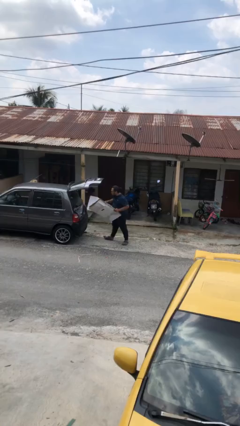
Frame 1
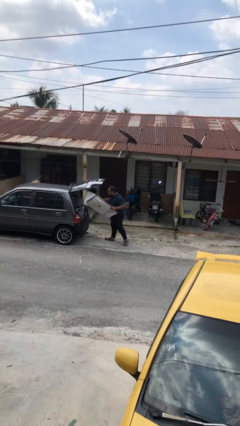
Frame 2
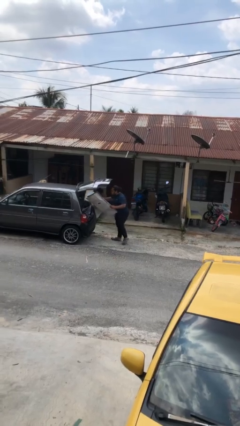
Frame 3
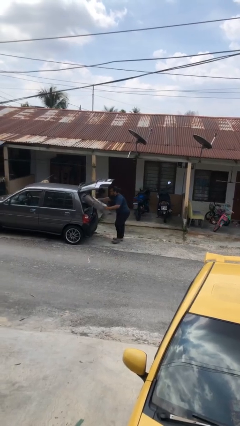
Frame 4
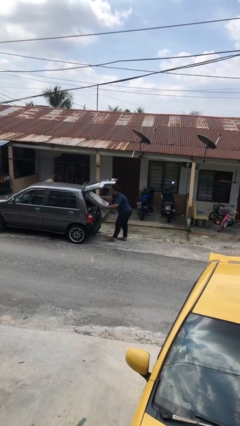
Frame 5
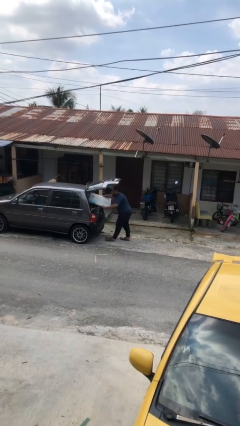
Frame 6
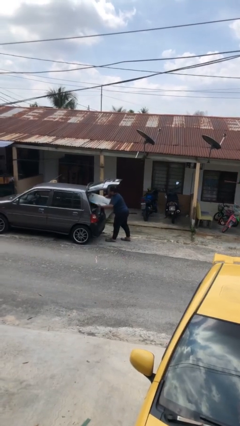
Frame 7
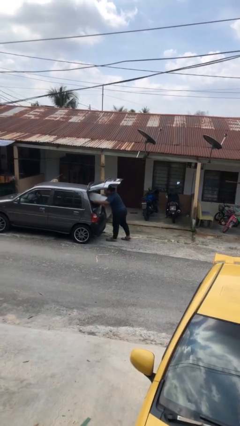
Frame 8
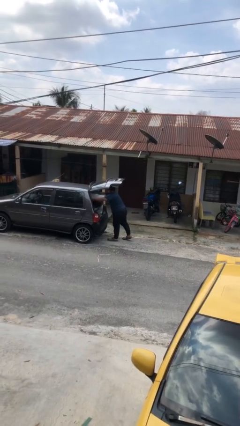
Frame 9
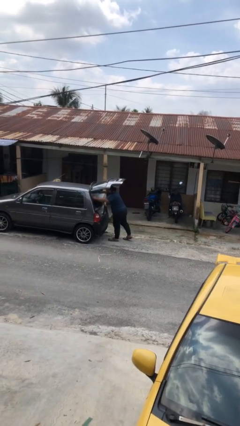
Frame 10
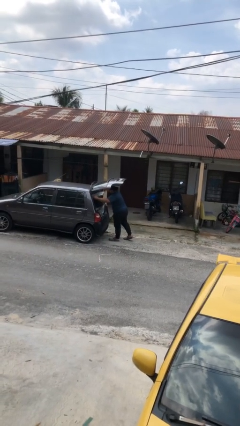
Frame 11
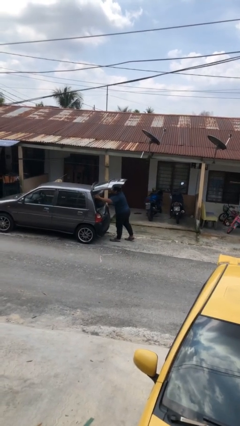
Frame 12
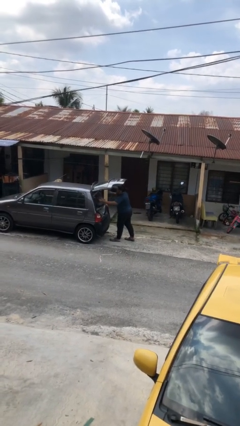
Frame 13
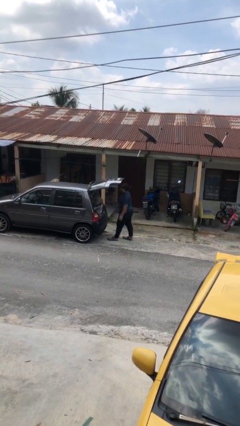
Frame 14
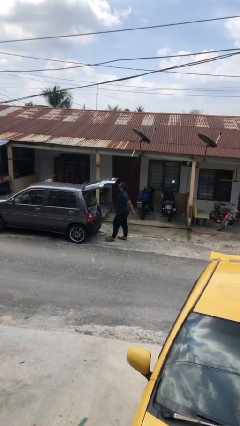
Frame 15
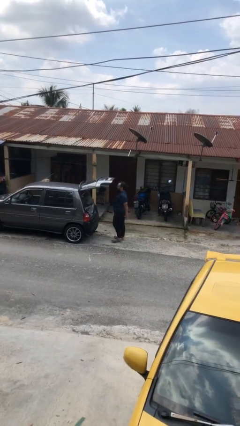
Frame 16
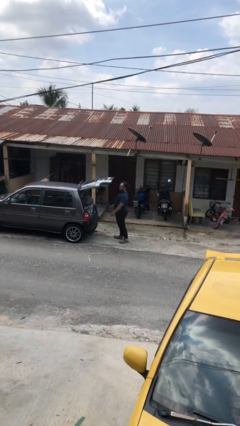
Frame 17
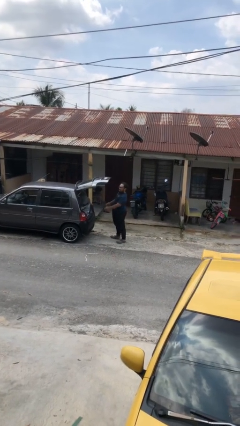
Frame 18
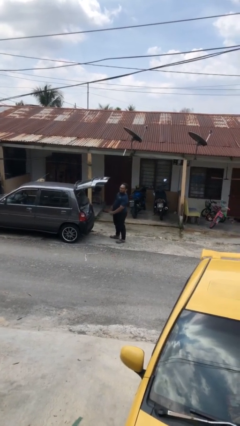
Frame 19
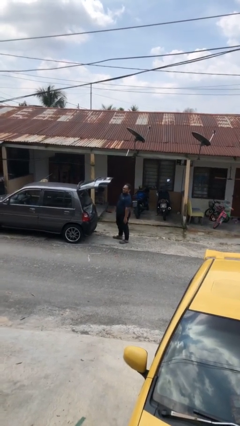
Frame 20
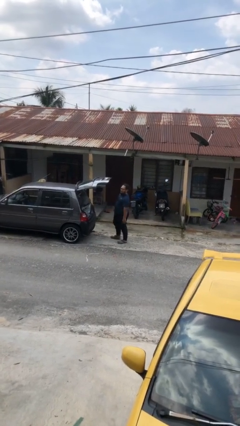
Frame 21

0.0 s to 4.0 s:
person loads car

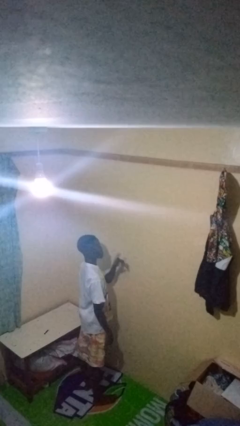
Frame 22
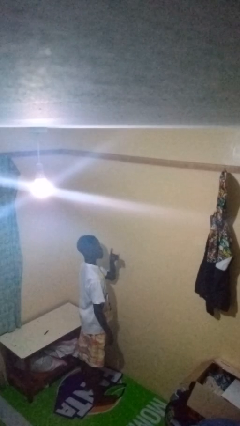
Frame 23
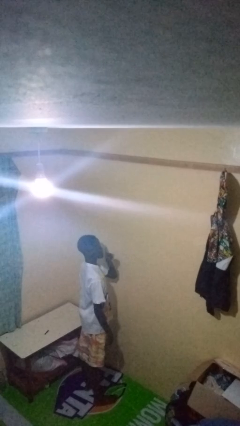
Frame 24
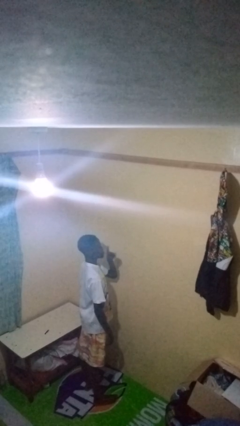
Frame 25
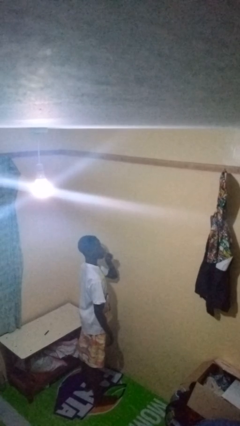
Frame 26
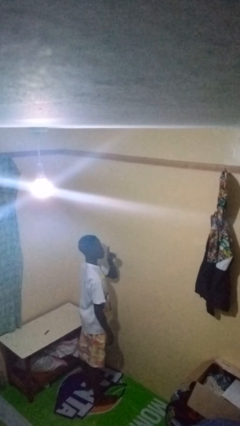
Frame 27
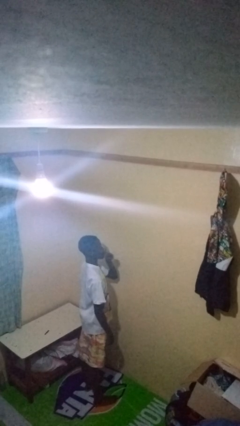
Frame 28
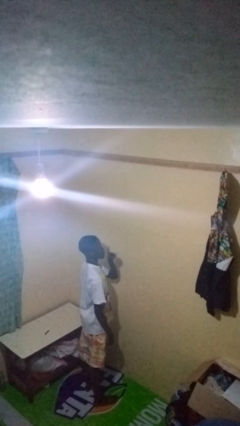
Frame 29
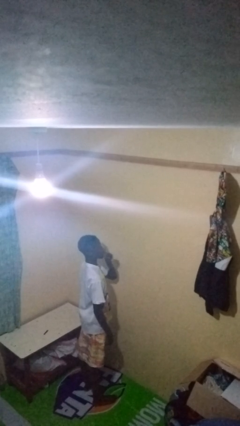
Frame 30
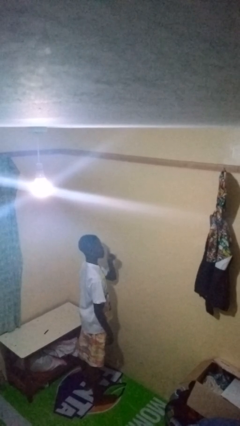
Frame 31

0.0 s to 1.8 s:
person gestures be quiet

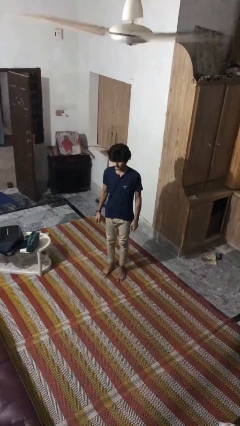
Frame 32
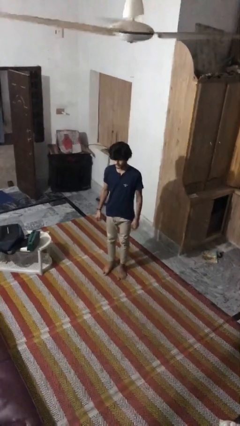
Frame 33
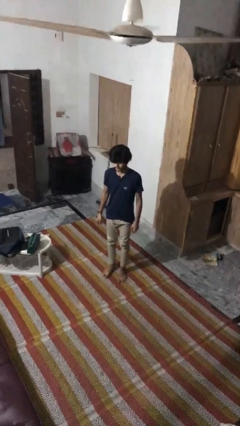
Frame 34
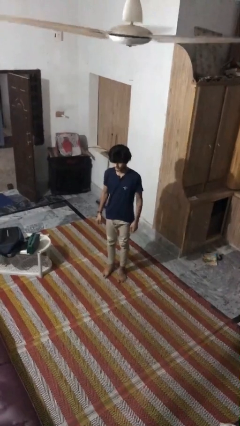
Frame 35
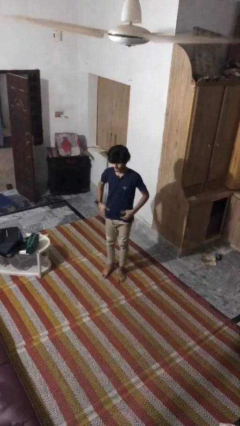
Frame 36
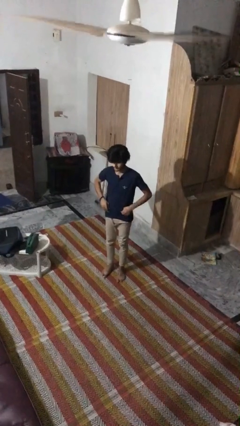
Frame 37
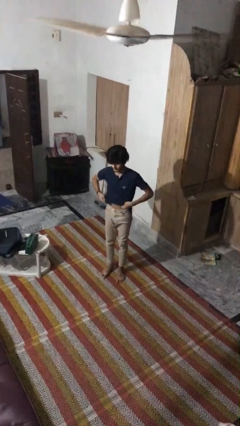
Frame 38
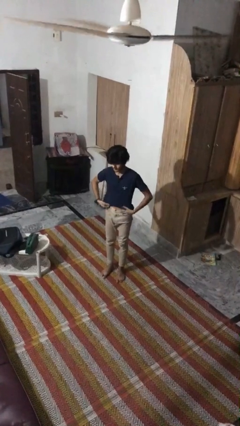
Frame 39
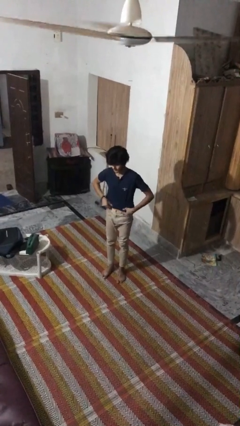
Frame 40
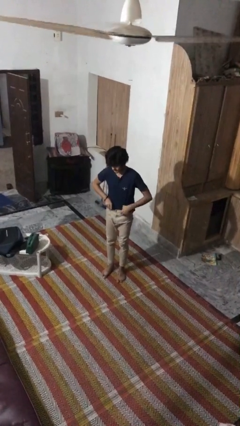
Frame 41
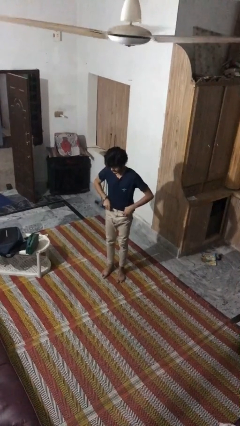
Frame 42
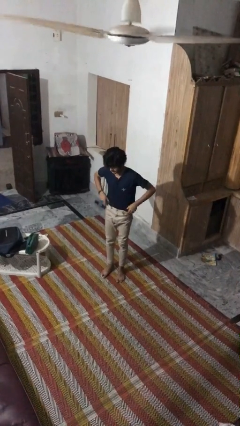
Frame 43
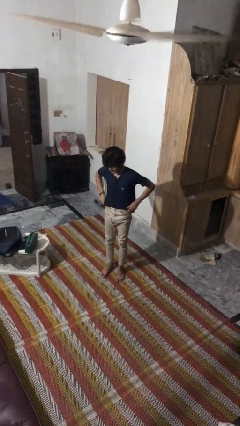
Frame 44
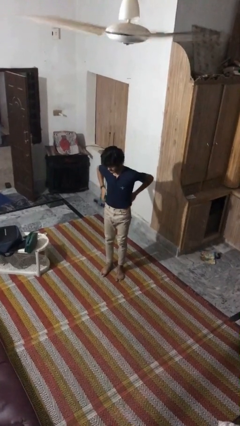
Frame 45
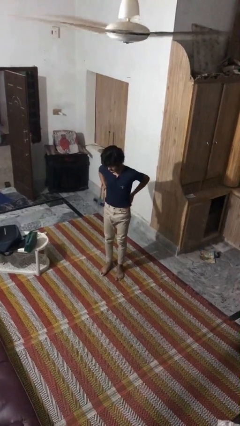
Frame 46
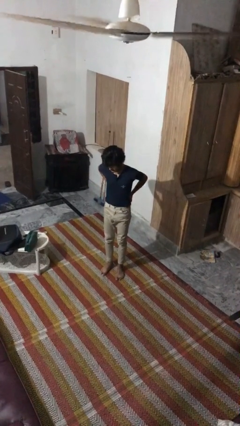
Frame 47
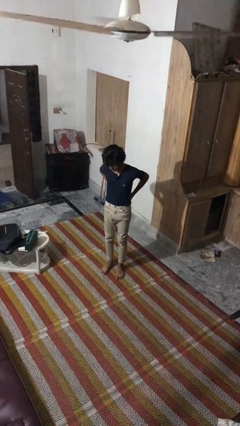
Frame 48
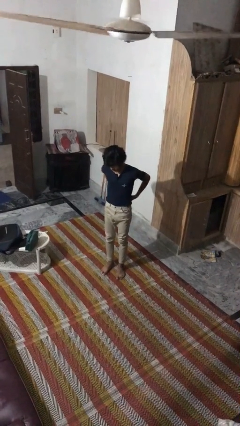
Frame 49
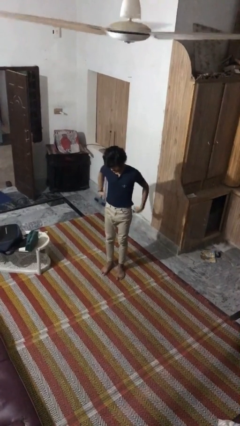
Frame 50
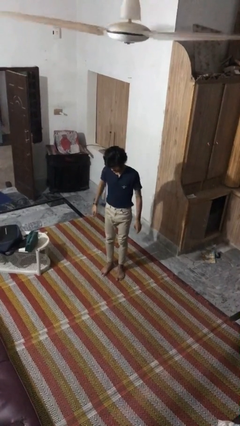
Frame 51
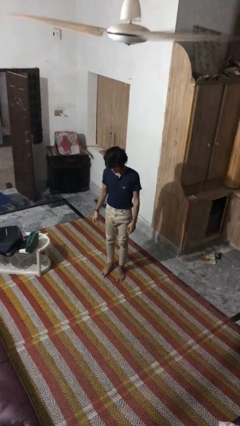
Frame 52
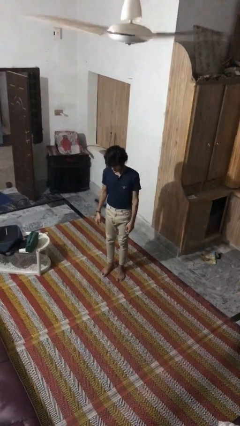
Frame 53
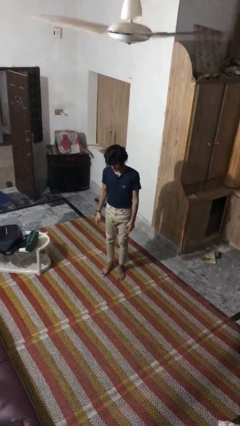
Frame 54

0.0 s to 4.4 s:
person tucks in shirt

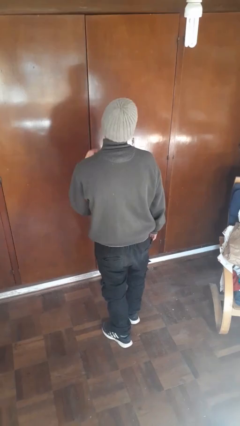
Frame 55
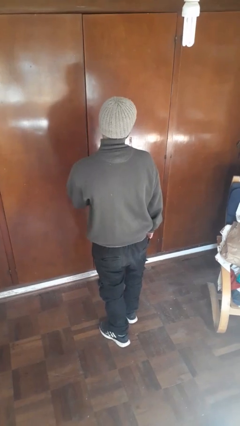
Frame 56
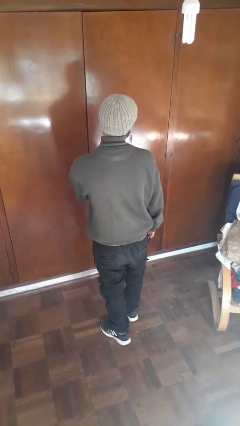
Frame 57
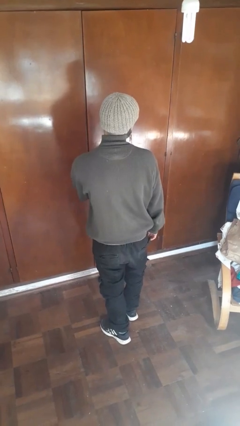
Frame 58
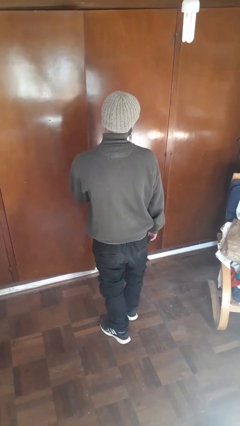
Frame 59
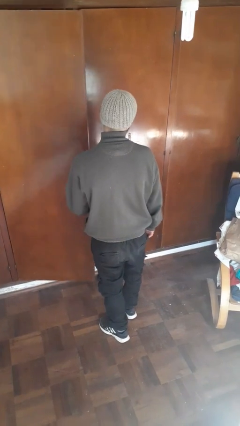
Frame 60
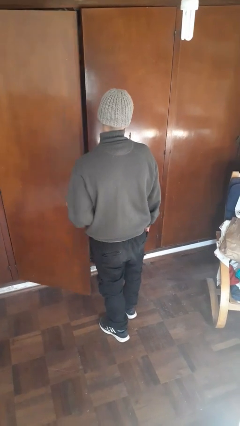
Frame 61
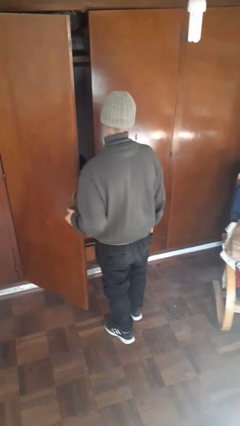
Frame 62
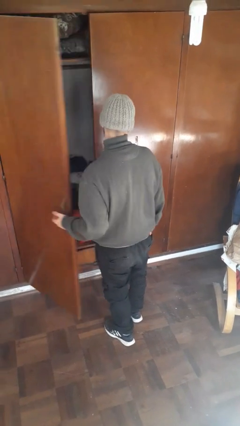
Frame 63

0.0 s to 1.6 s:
person opens closet door

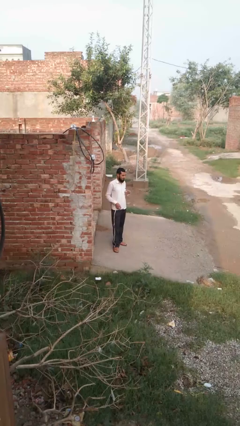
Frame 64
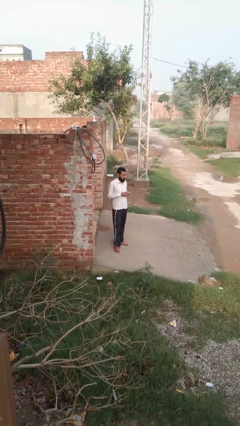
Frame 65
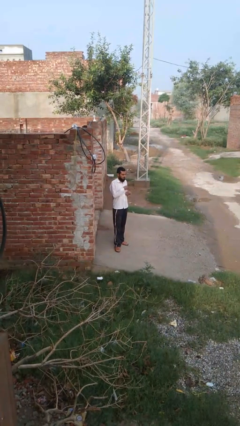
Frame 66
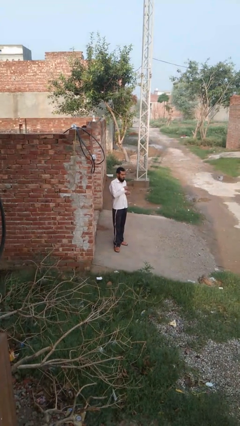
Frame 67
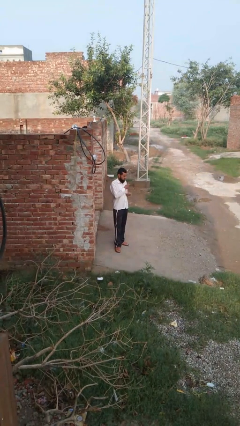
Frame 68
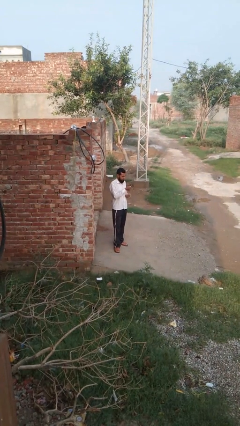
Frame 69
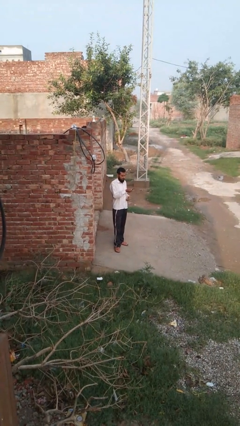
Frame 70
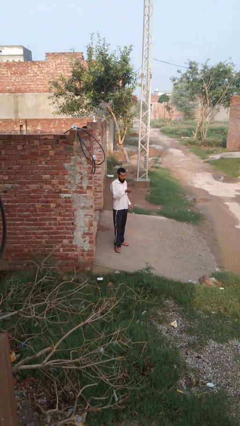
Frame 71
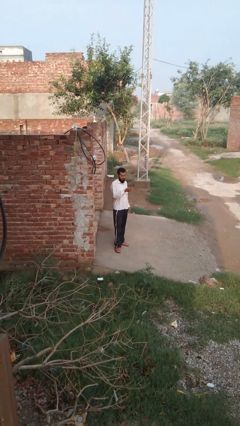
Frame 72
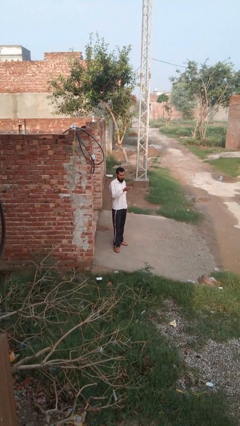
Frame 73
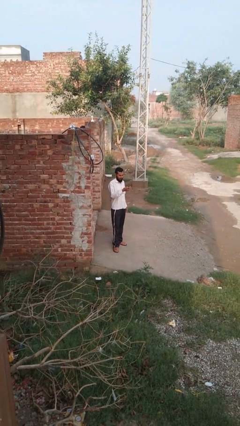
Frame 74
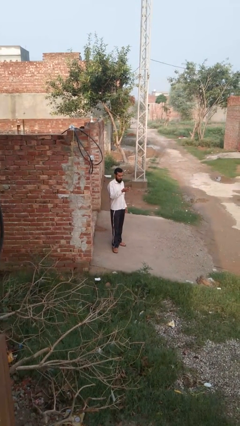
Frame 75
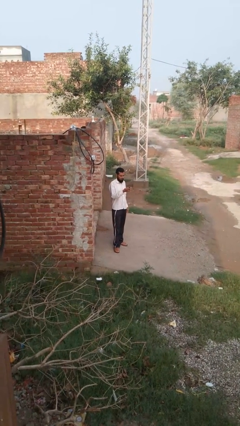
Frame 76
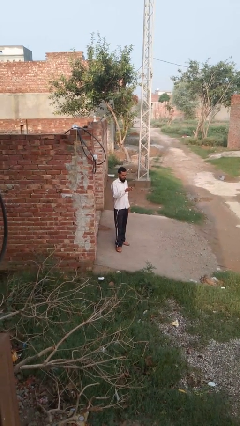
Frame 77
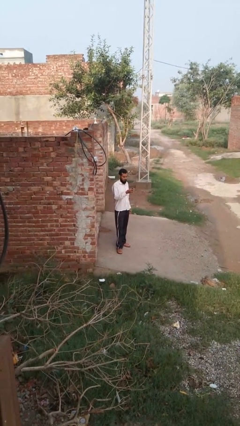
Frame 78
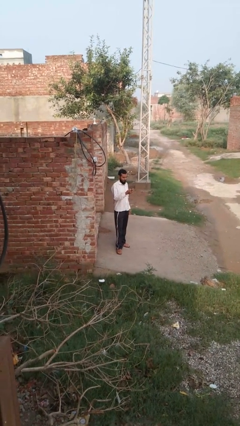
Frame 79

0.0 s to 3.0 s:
person takes phone from pocket

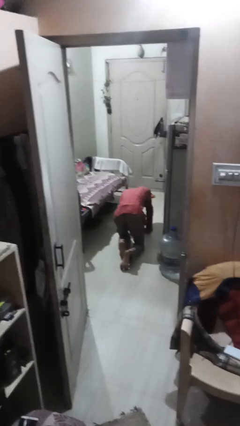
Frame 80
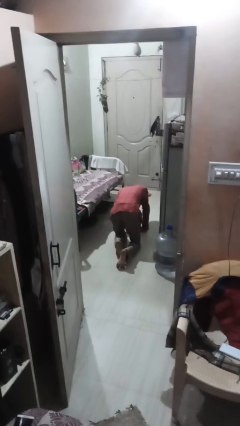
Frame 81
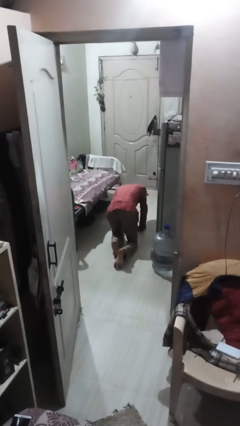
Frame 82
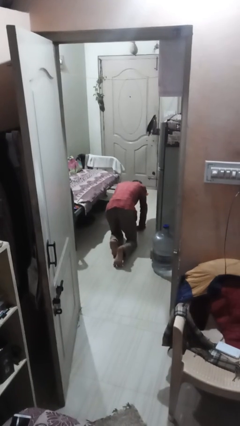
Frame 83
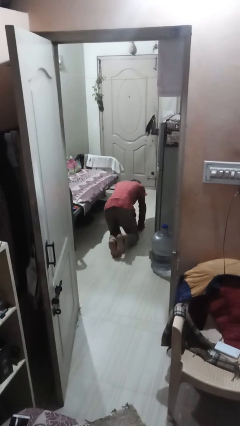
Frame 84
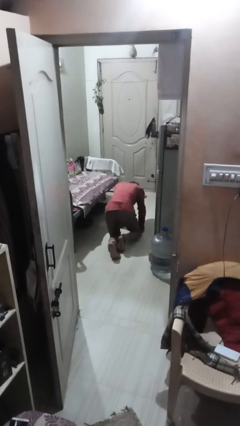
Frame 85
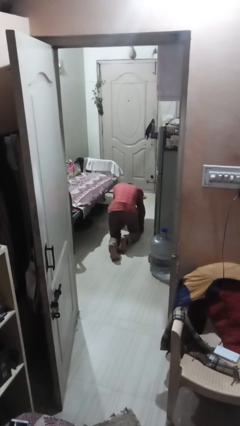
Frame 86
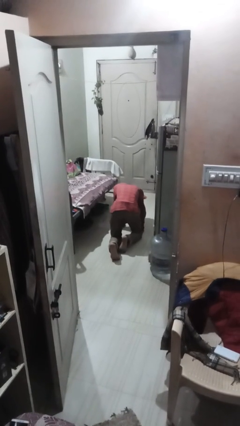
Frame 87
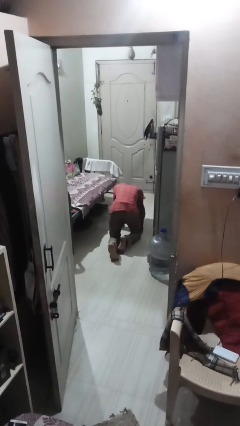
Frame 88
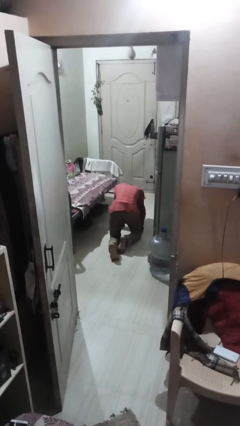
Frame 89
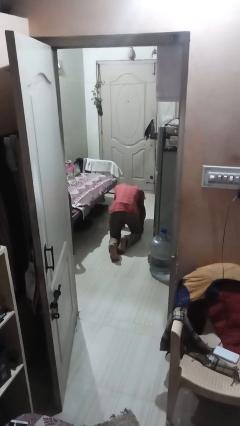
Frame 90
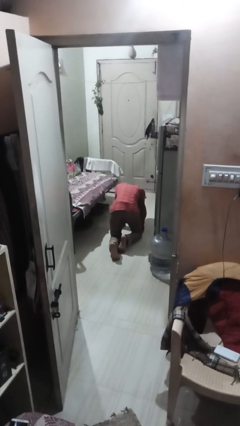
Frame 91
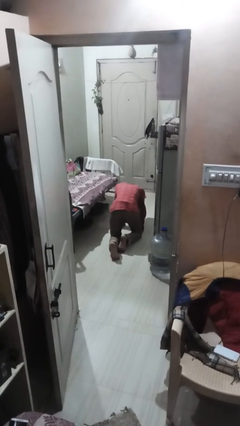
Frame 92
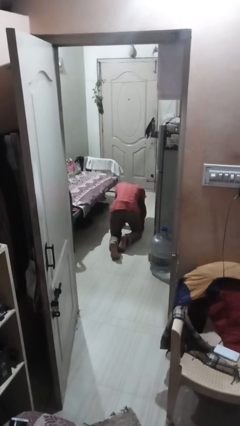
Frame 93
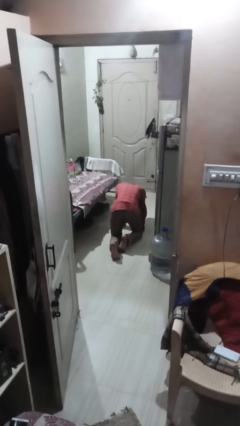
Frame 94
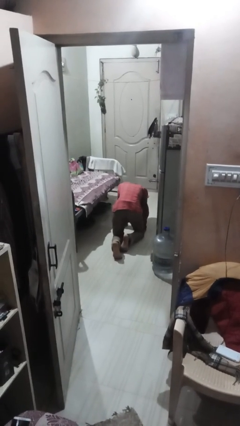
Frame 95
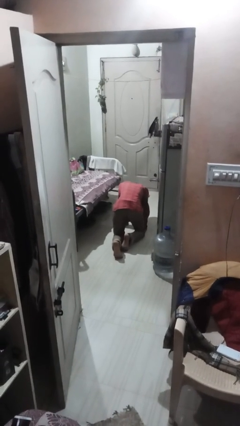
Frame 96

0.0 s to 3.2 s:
person crawls
